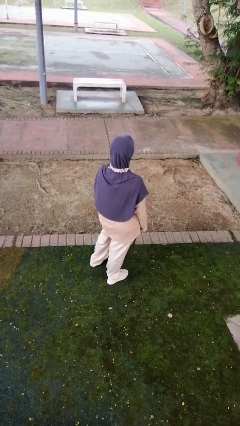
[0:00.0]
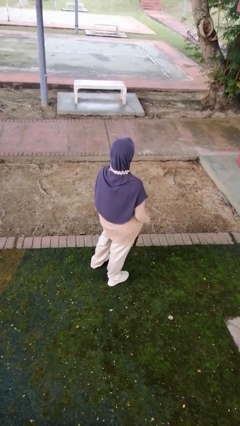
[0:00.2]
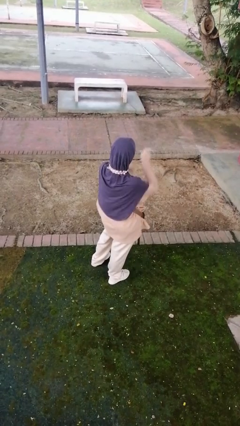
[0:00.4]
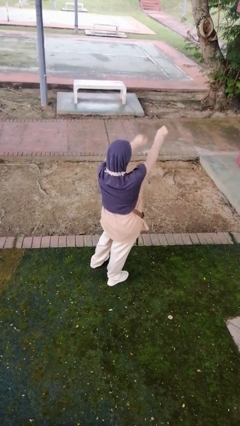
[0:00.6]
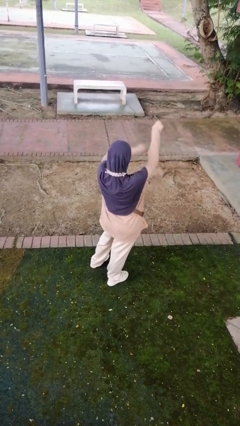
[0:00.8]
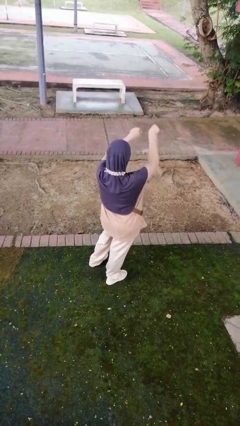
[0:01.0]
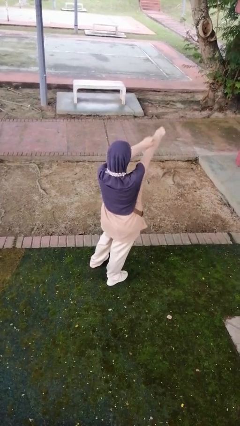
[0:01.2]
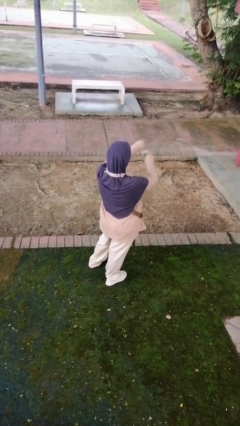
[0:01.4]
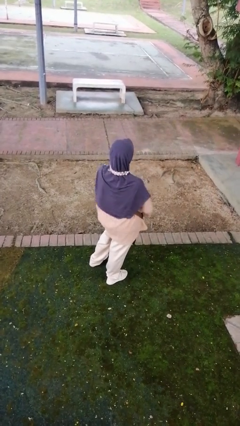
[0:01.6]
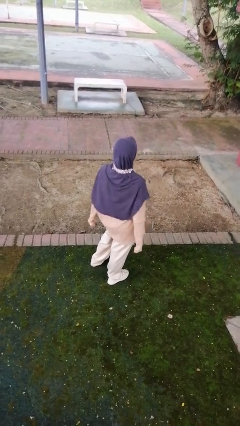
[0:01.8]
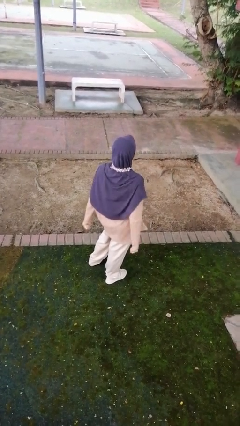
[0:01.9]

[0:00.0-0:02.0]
person punches

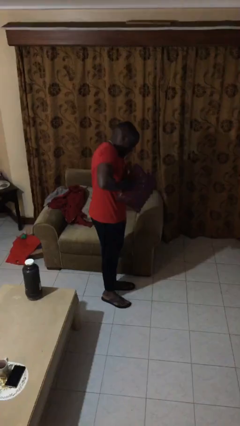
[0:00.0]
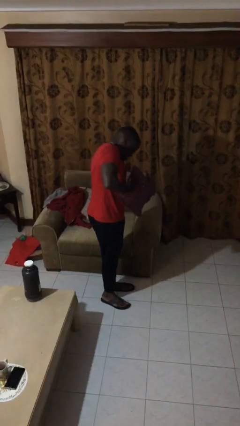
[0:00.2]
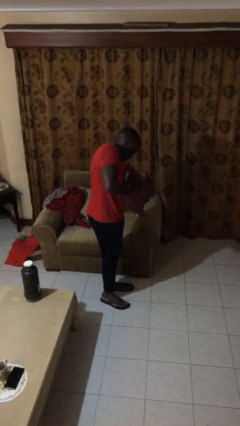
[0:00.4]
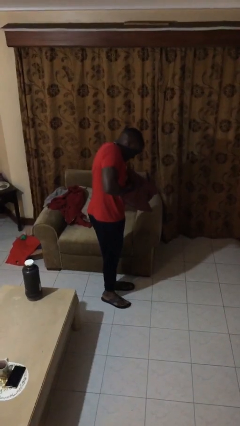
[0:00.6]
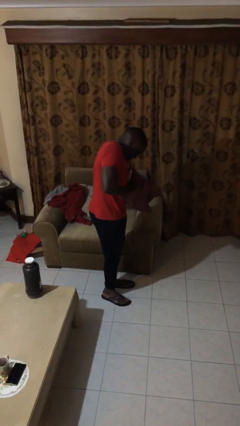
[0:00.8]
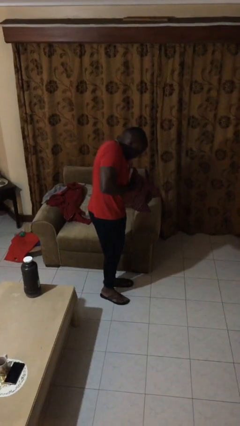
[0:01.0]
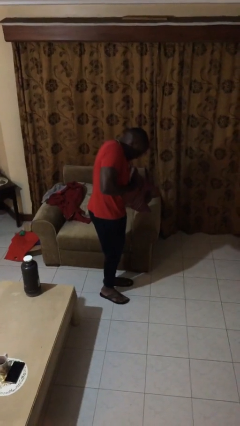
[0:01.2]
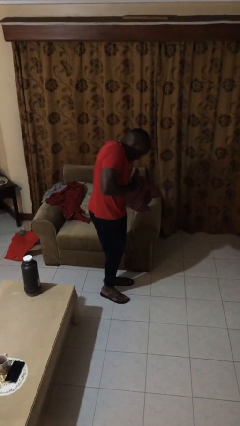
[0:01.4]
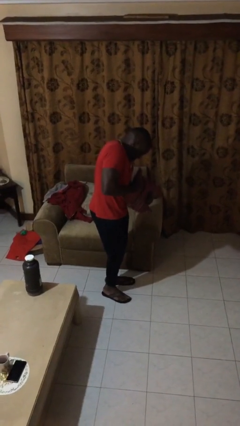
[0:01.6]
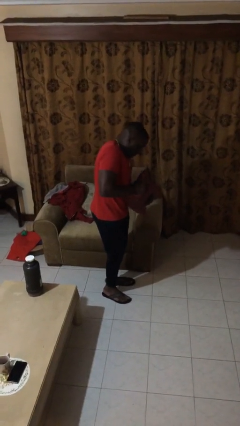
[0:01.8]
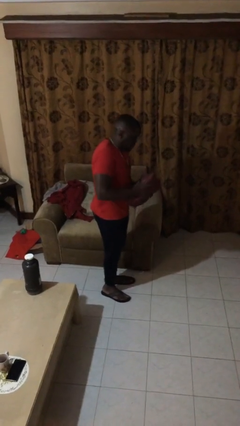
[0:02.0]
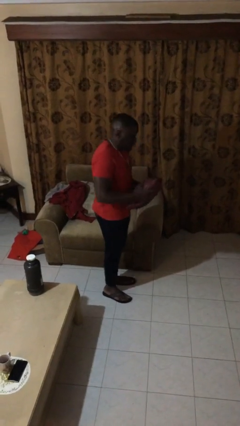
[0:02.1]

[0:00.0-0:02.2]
person squeezes object

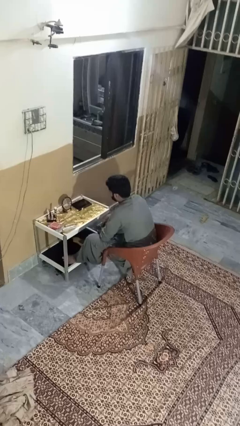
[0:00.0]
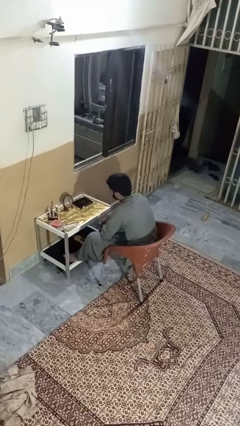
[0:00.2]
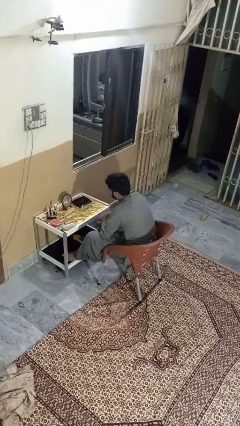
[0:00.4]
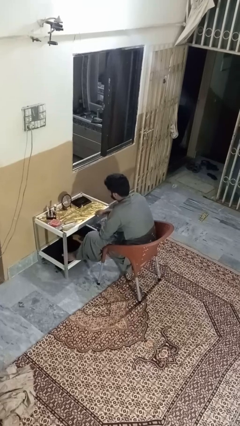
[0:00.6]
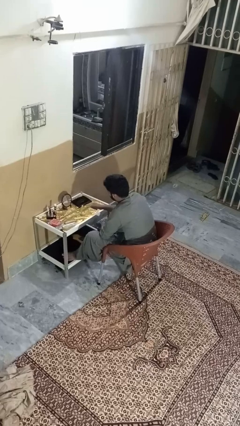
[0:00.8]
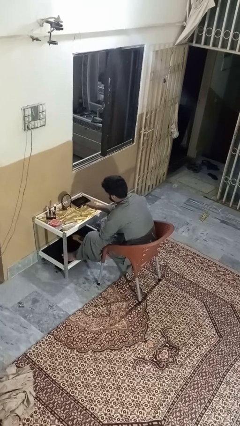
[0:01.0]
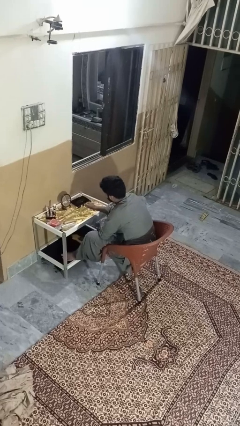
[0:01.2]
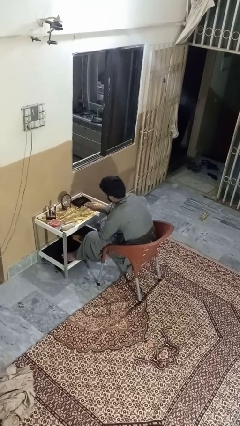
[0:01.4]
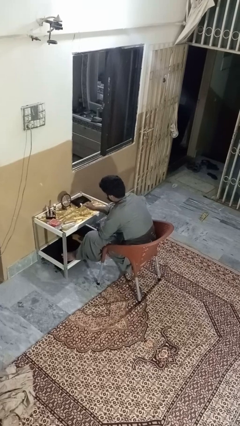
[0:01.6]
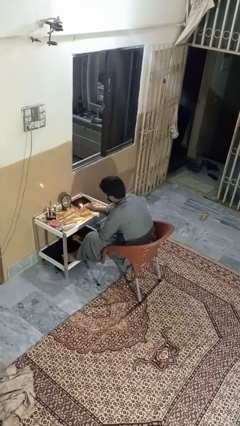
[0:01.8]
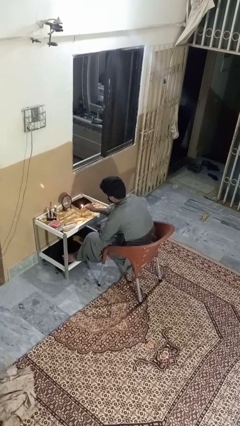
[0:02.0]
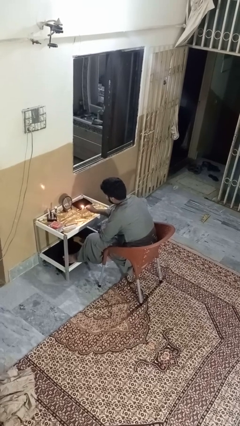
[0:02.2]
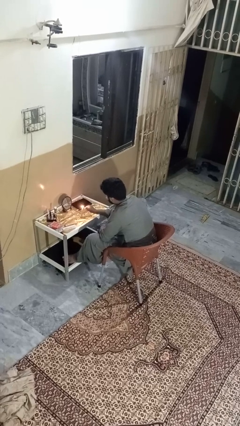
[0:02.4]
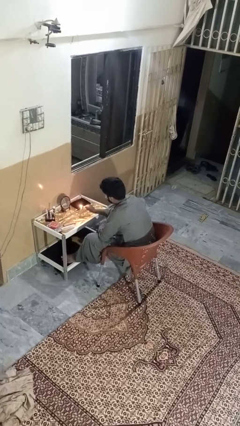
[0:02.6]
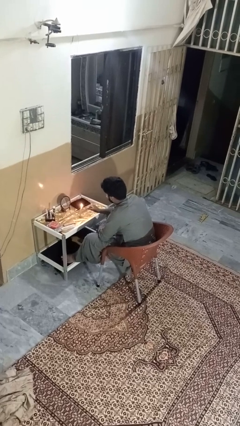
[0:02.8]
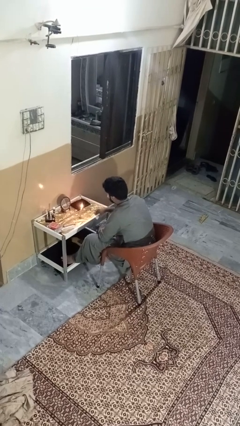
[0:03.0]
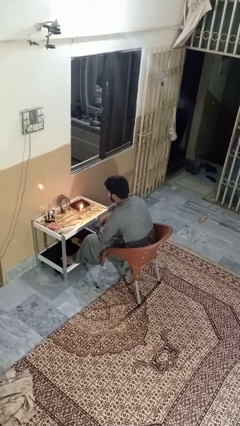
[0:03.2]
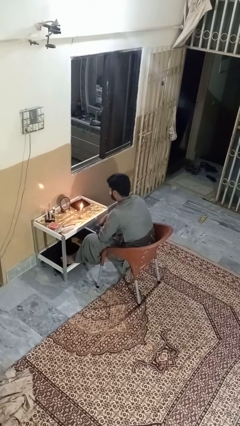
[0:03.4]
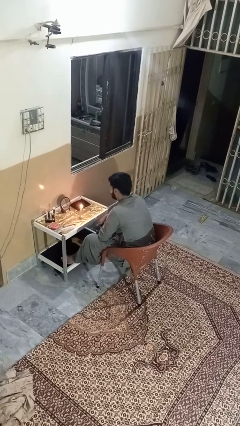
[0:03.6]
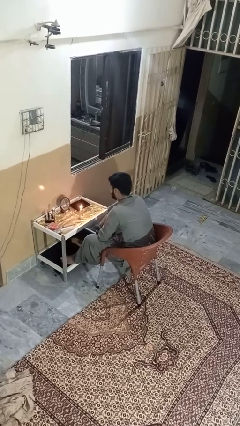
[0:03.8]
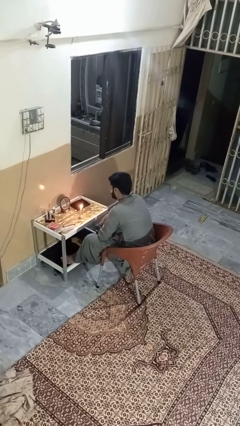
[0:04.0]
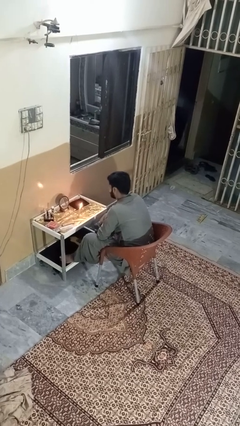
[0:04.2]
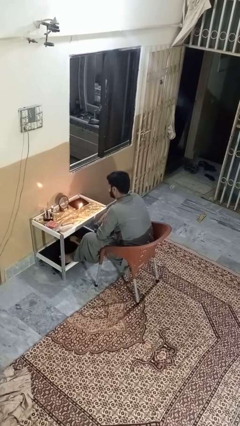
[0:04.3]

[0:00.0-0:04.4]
person lights candle

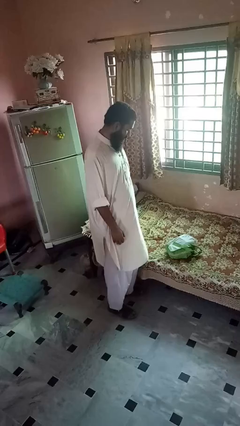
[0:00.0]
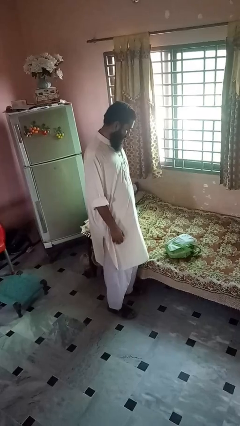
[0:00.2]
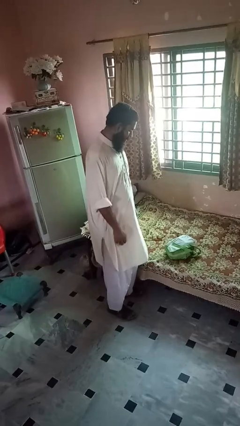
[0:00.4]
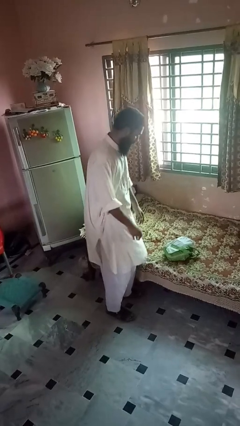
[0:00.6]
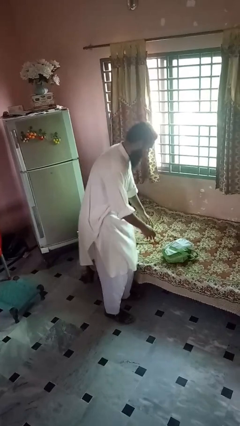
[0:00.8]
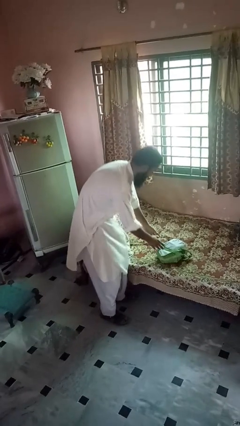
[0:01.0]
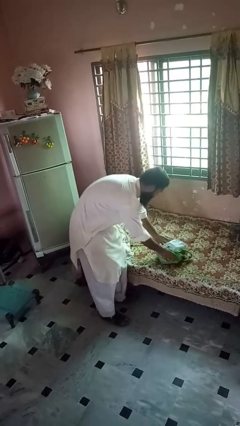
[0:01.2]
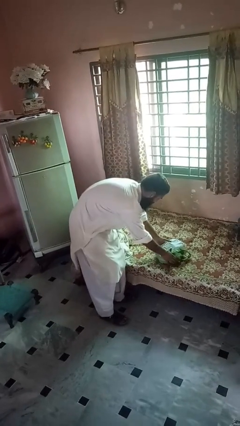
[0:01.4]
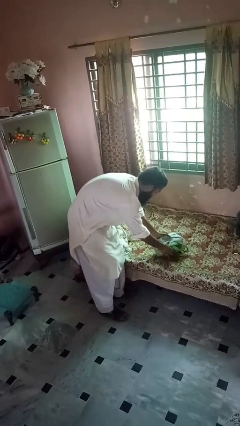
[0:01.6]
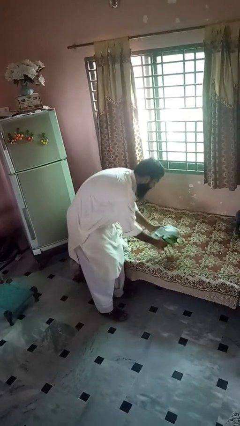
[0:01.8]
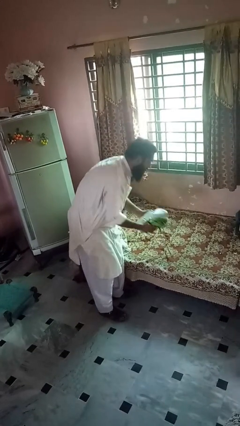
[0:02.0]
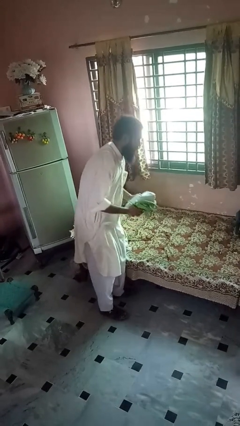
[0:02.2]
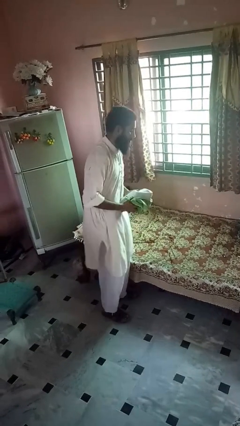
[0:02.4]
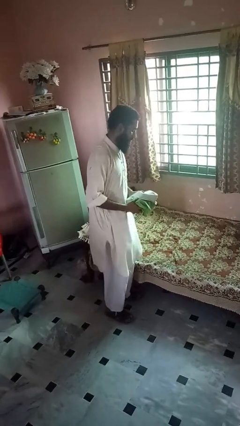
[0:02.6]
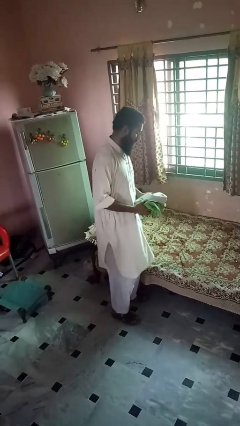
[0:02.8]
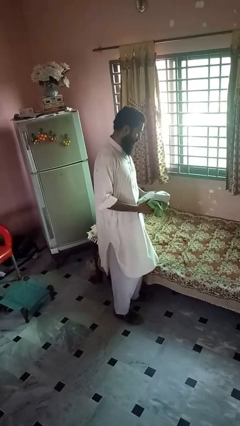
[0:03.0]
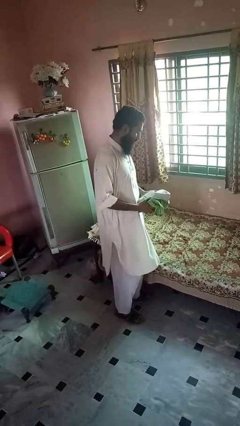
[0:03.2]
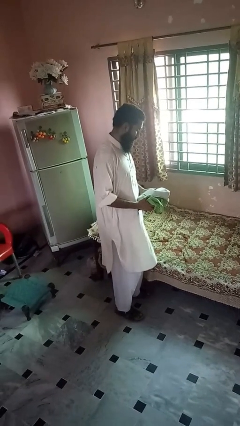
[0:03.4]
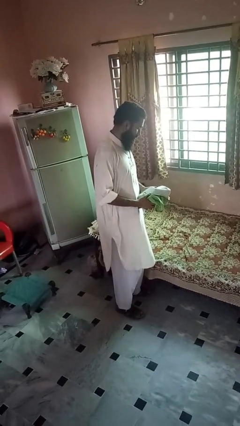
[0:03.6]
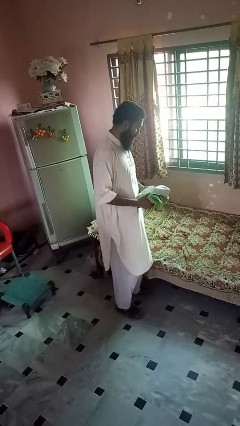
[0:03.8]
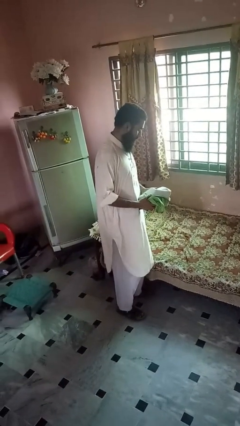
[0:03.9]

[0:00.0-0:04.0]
person picks up object from bed

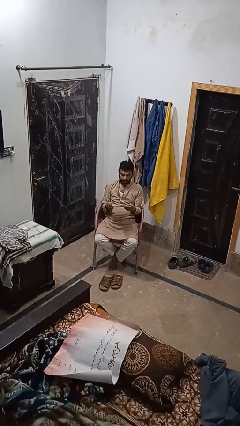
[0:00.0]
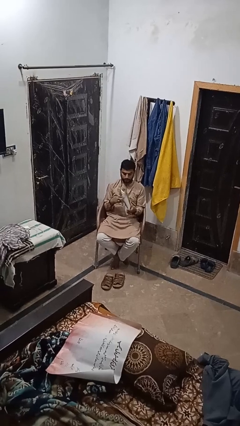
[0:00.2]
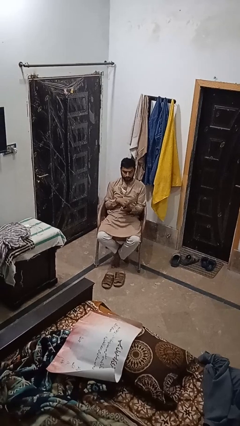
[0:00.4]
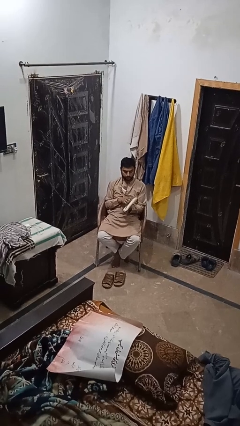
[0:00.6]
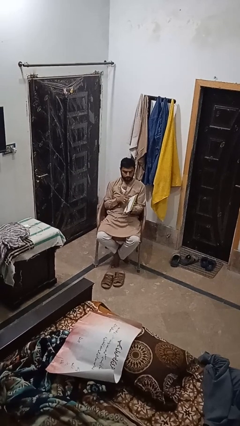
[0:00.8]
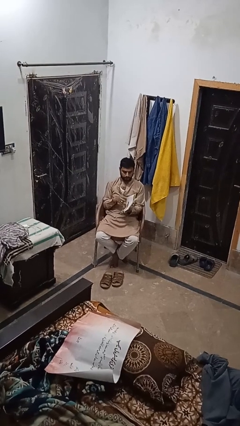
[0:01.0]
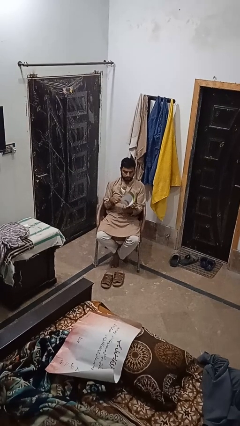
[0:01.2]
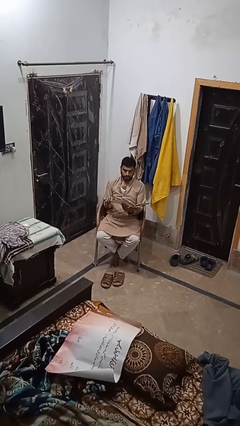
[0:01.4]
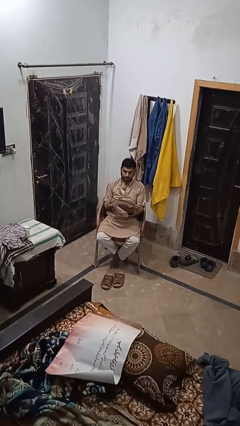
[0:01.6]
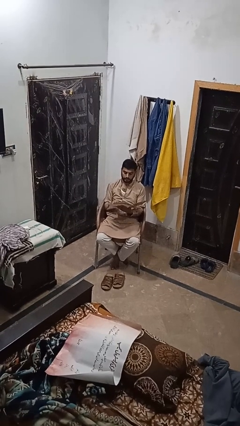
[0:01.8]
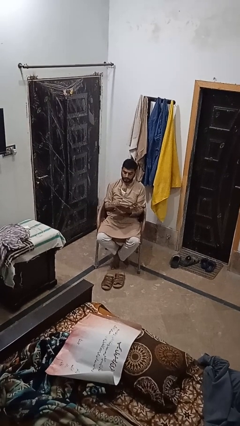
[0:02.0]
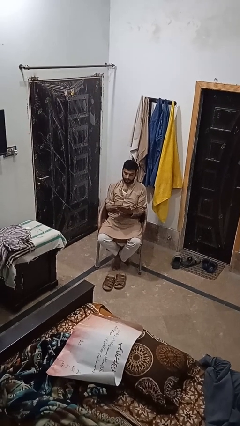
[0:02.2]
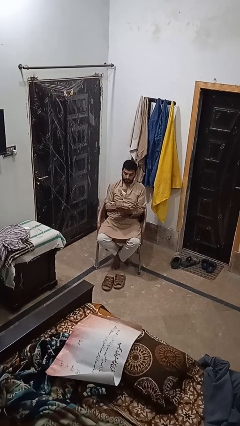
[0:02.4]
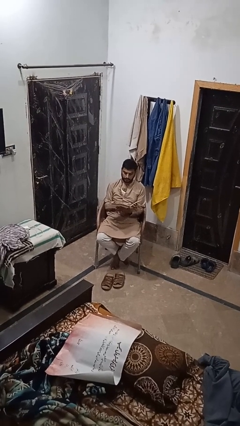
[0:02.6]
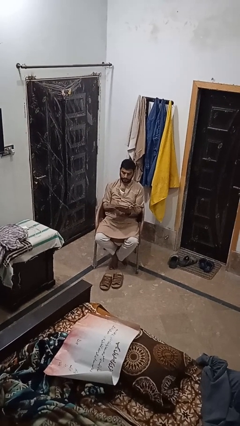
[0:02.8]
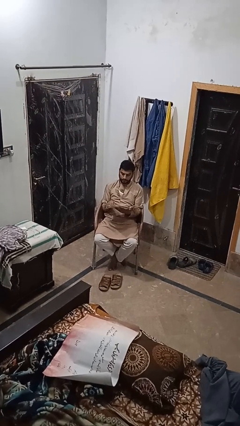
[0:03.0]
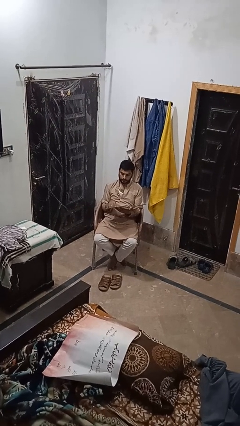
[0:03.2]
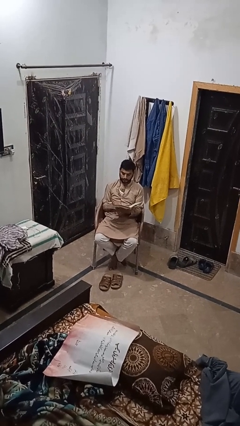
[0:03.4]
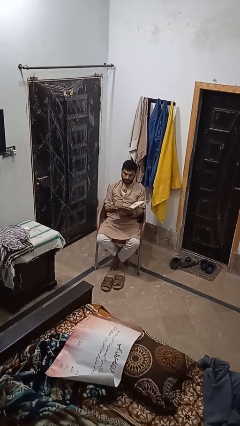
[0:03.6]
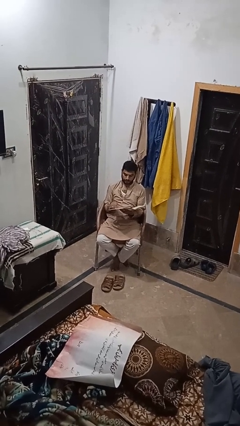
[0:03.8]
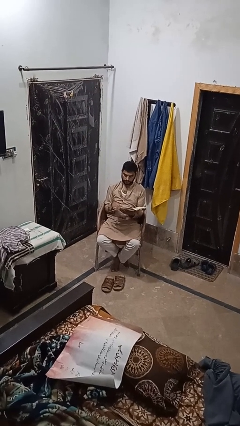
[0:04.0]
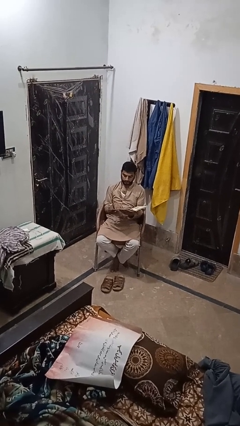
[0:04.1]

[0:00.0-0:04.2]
person reads magazine

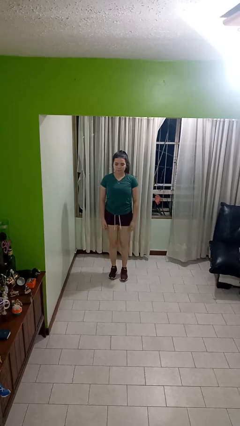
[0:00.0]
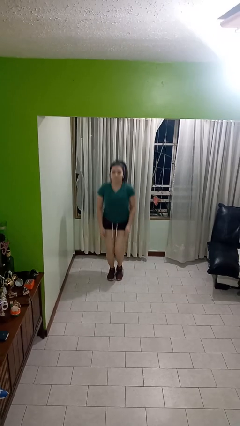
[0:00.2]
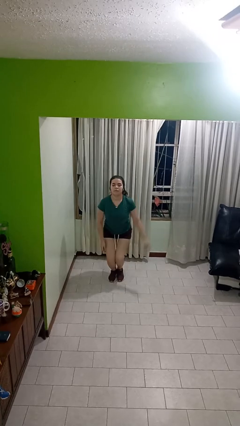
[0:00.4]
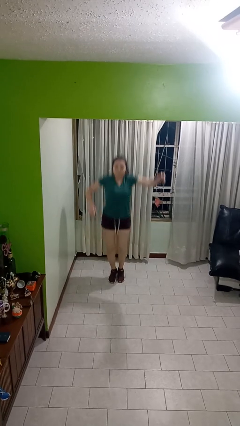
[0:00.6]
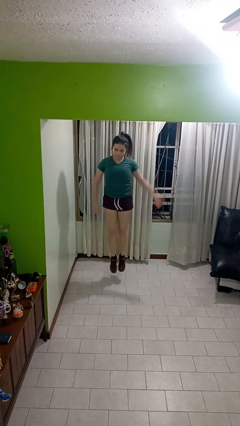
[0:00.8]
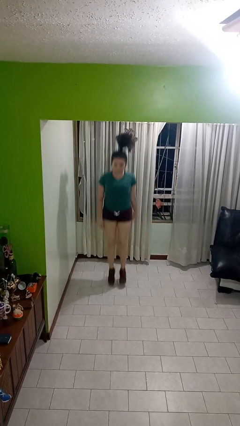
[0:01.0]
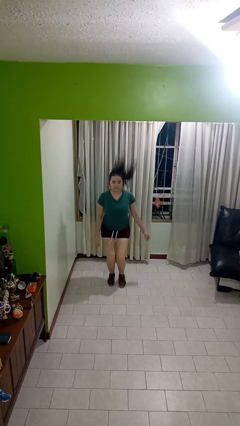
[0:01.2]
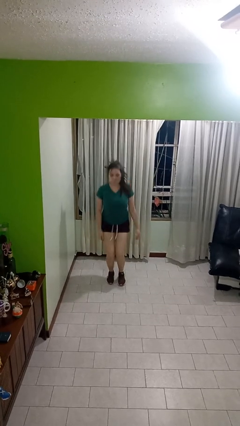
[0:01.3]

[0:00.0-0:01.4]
person jumps
